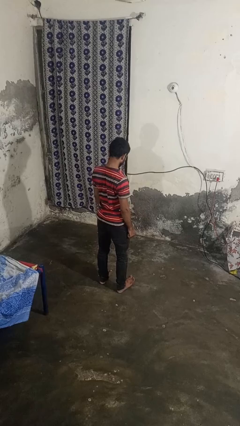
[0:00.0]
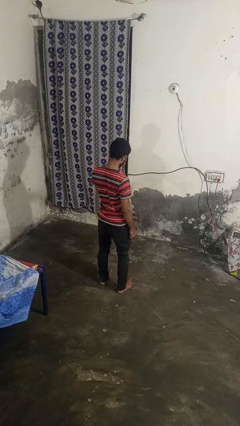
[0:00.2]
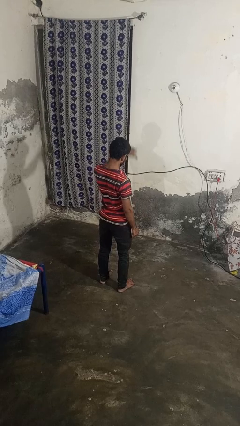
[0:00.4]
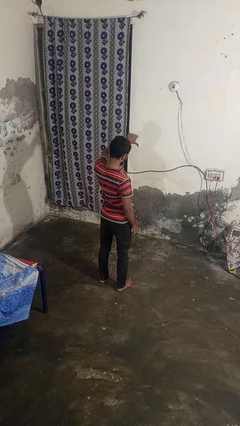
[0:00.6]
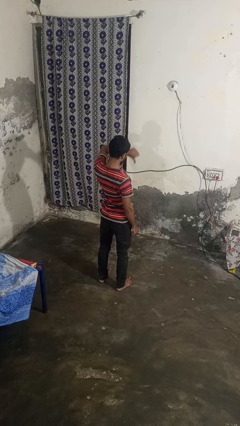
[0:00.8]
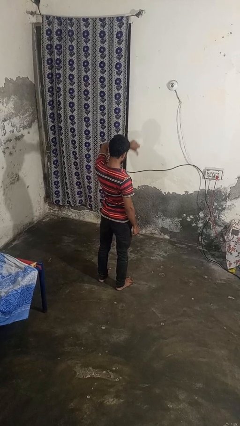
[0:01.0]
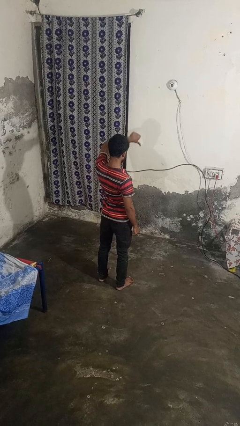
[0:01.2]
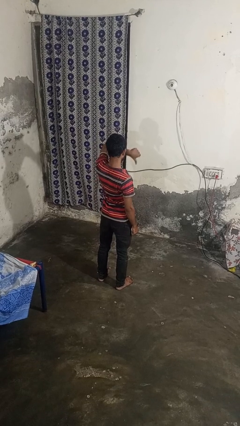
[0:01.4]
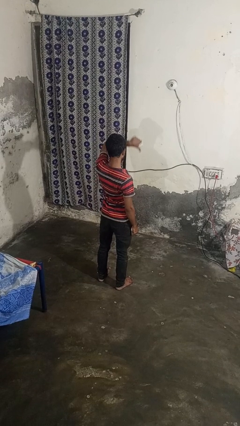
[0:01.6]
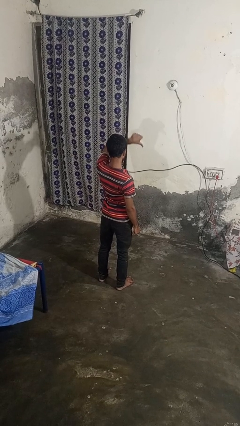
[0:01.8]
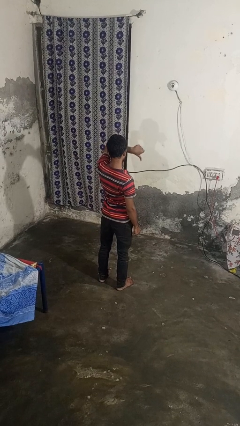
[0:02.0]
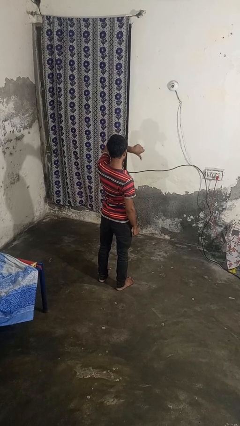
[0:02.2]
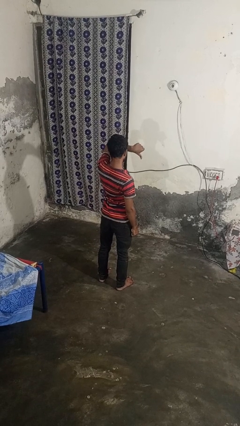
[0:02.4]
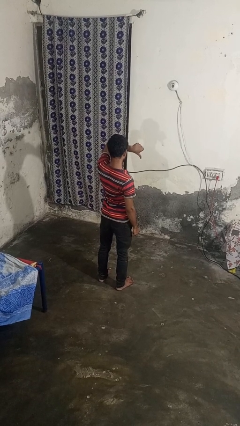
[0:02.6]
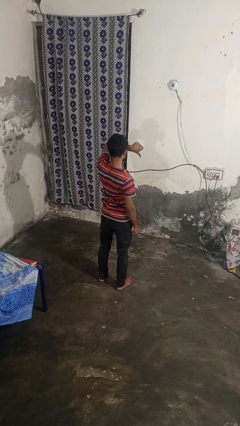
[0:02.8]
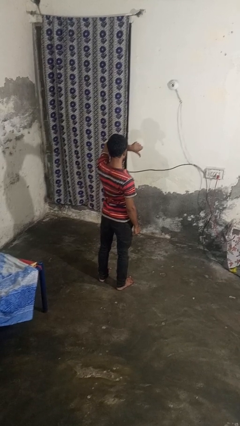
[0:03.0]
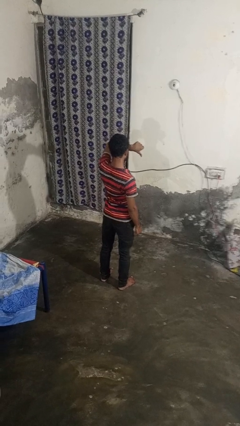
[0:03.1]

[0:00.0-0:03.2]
person gestures thumbs down

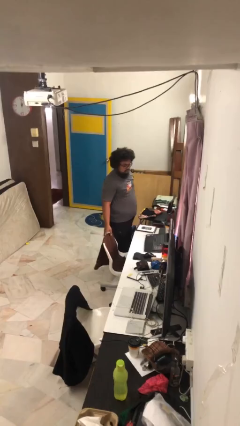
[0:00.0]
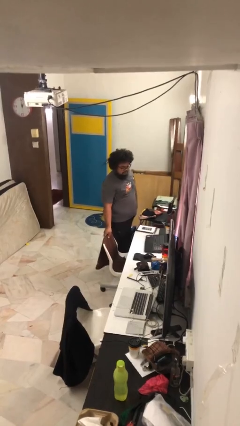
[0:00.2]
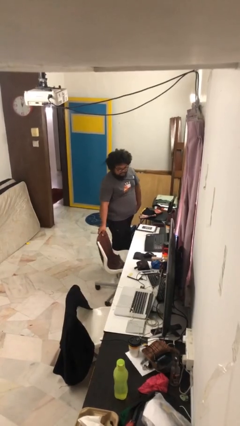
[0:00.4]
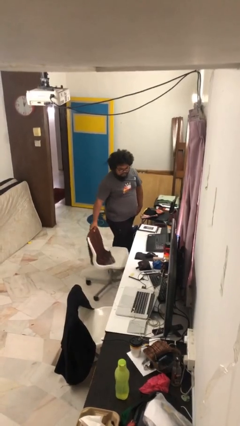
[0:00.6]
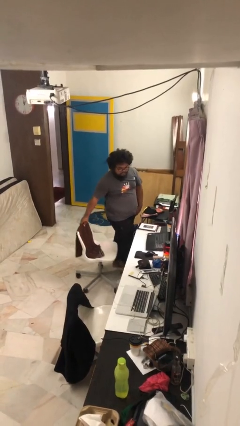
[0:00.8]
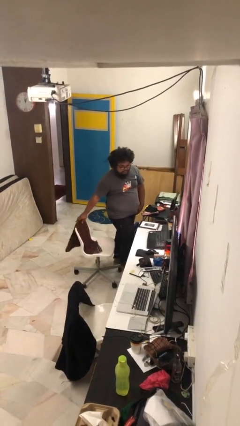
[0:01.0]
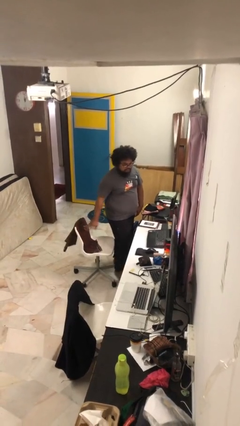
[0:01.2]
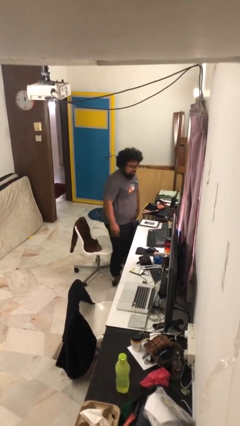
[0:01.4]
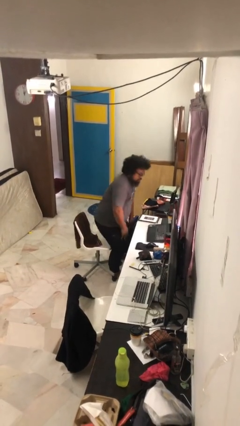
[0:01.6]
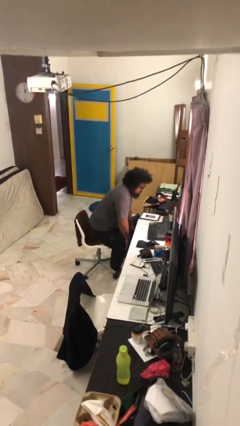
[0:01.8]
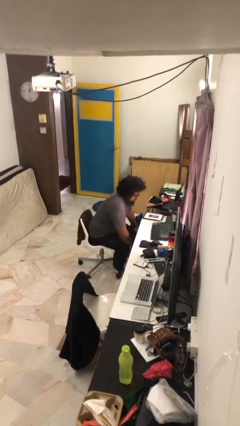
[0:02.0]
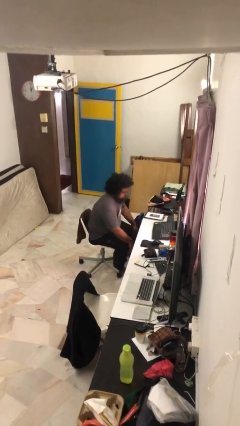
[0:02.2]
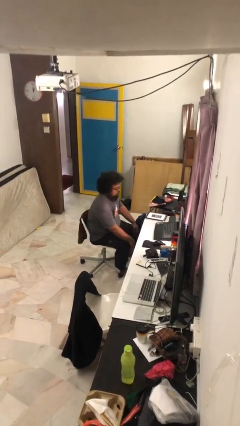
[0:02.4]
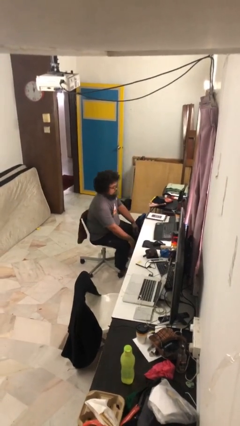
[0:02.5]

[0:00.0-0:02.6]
person sits down

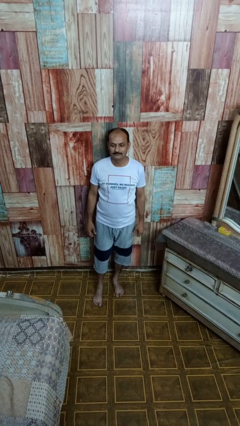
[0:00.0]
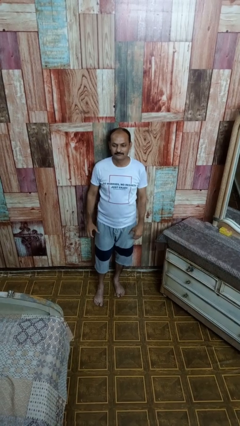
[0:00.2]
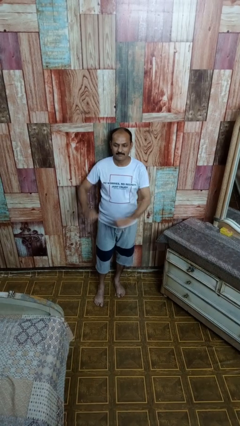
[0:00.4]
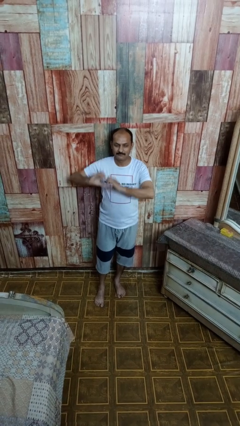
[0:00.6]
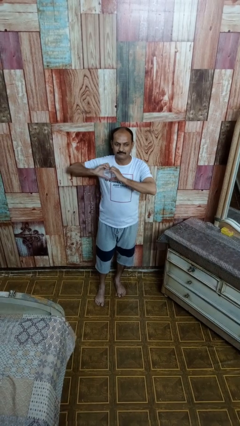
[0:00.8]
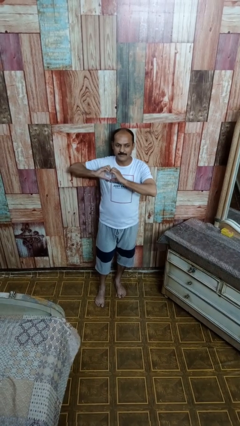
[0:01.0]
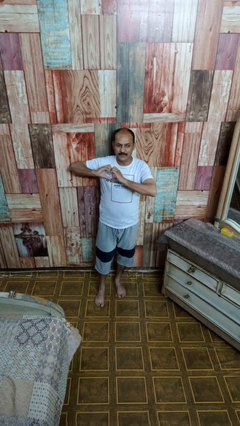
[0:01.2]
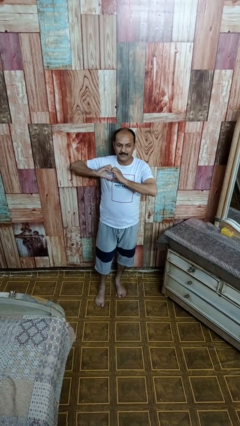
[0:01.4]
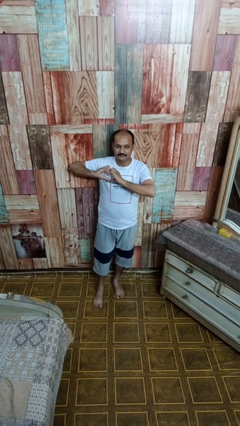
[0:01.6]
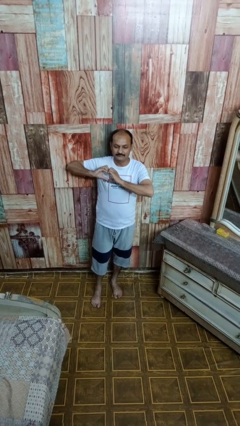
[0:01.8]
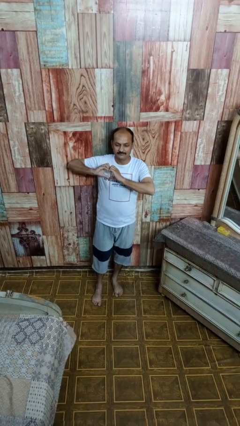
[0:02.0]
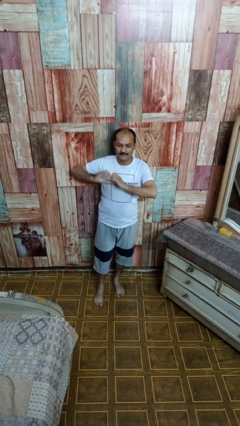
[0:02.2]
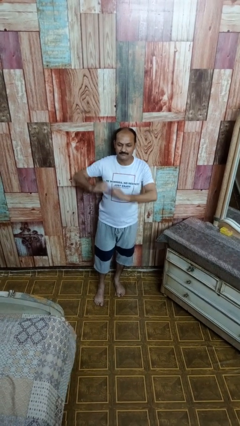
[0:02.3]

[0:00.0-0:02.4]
person gestures heart

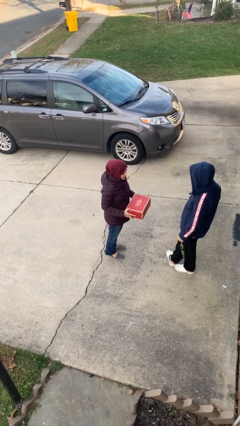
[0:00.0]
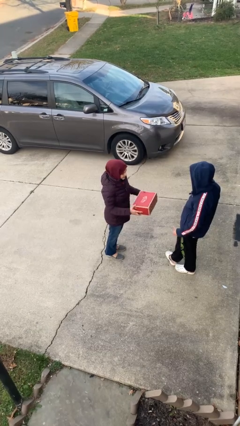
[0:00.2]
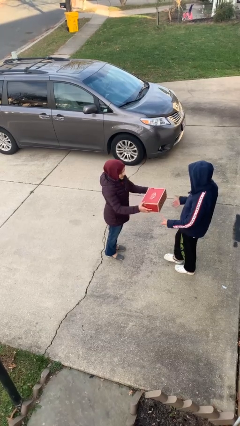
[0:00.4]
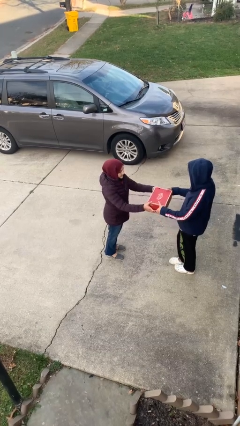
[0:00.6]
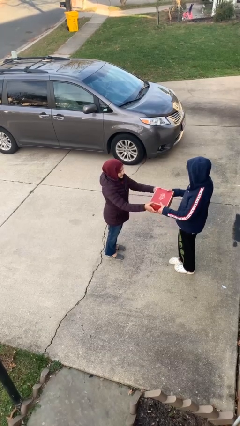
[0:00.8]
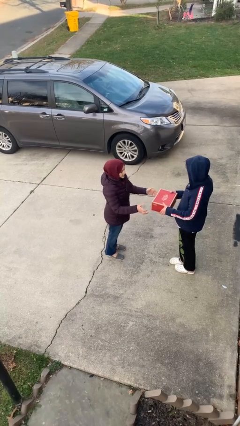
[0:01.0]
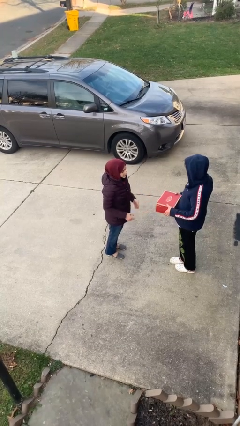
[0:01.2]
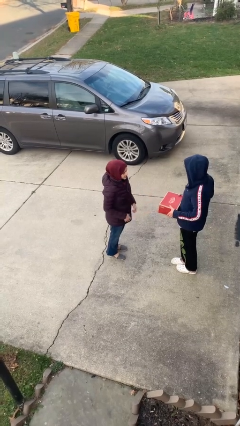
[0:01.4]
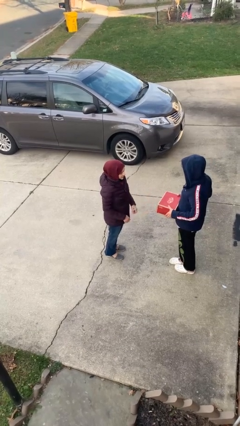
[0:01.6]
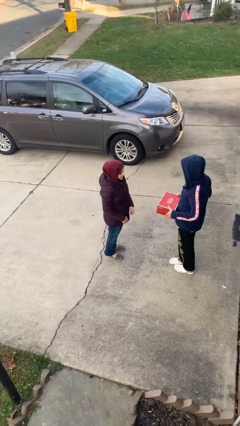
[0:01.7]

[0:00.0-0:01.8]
person transfers object to person

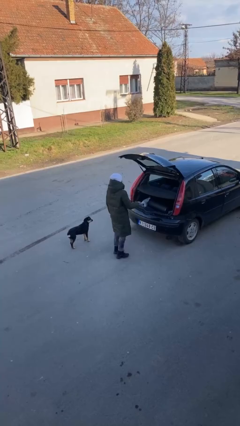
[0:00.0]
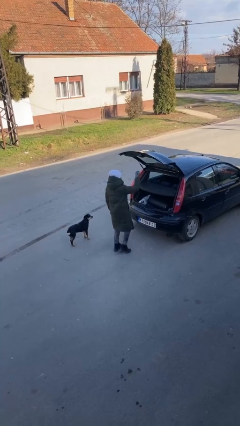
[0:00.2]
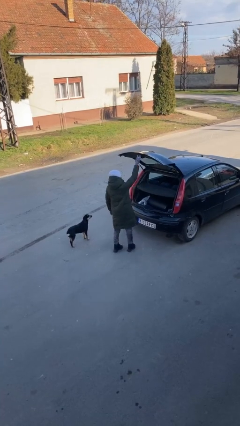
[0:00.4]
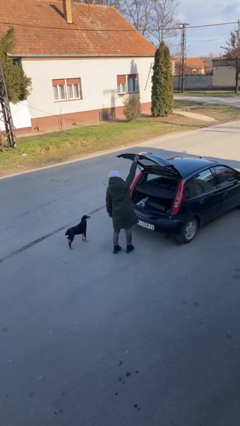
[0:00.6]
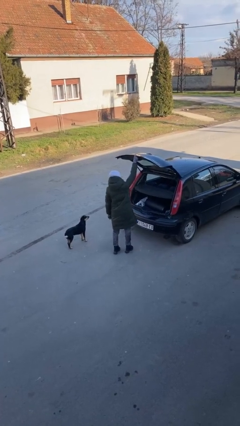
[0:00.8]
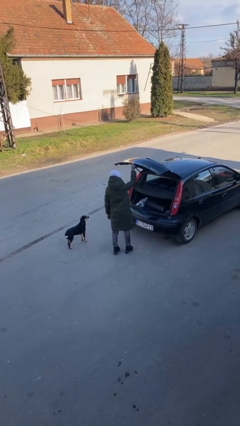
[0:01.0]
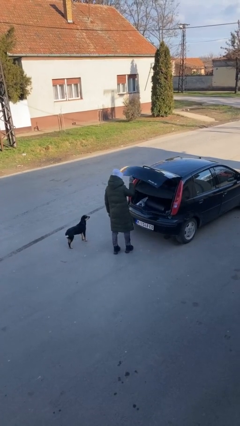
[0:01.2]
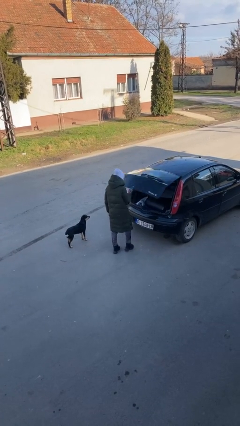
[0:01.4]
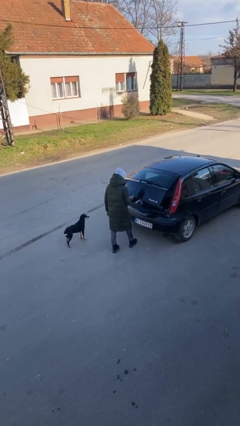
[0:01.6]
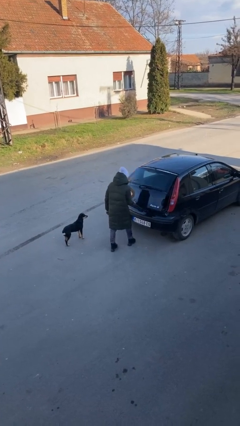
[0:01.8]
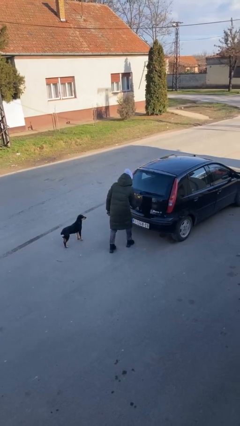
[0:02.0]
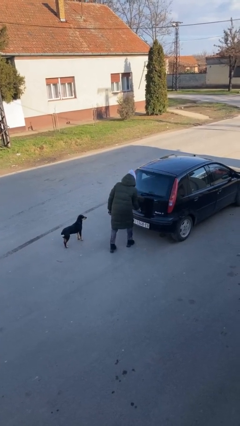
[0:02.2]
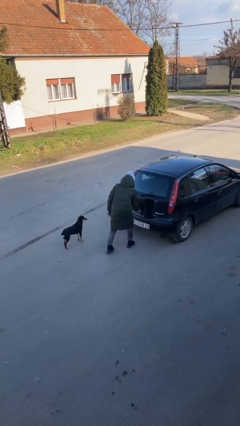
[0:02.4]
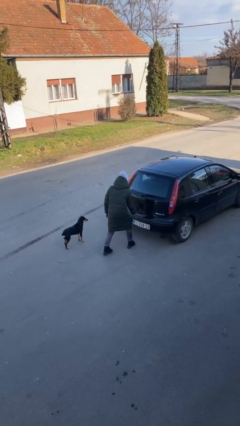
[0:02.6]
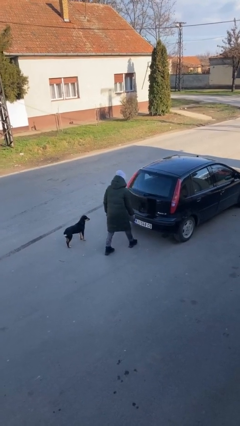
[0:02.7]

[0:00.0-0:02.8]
person closes car trunk

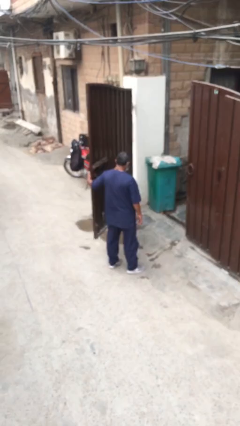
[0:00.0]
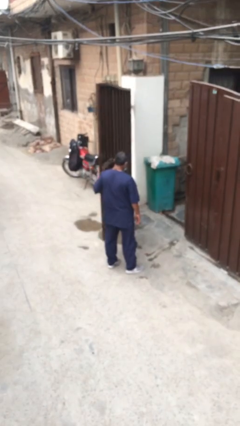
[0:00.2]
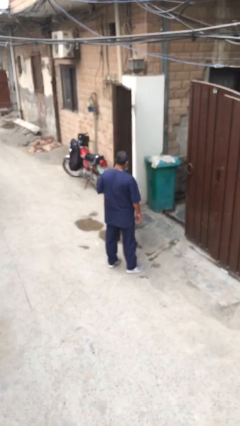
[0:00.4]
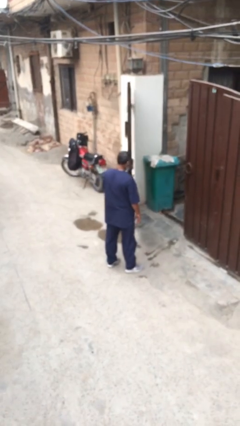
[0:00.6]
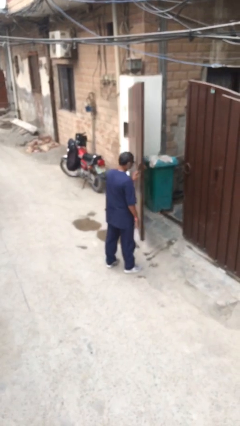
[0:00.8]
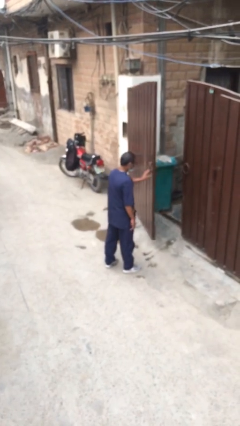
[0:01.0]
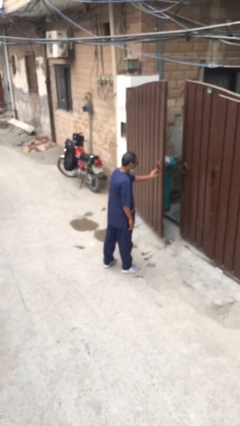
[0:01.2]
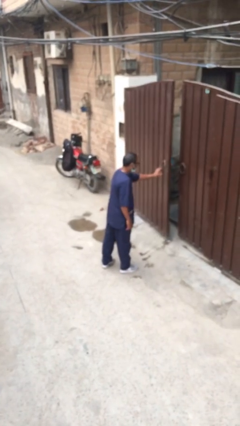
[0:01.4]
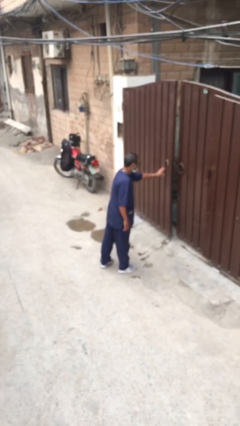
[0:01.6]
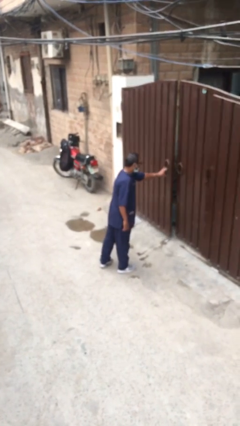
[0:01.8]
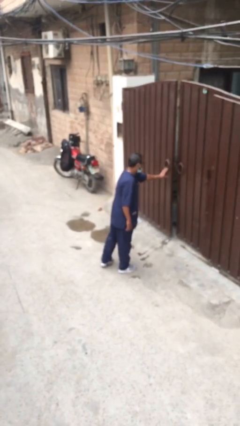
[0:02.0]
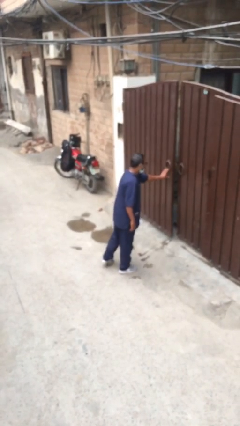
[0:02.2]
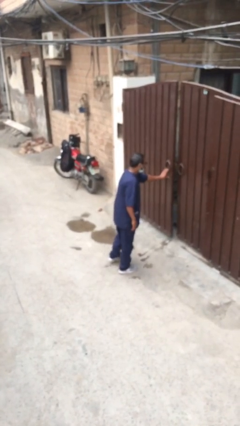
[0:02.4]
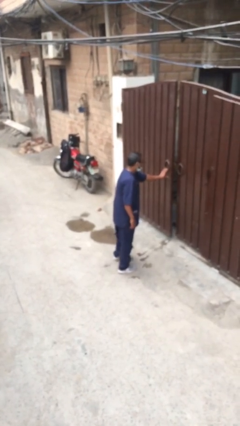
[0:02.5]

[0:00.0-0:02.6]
person closes facility door

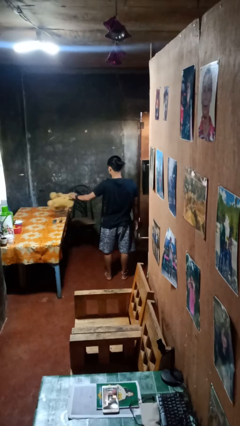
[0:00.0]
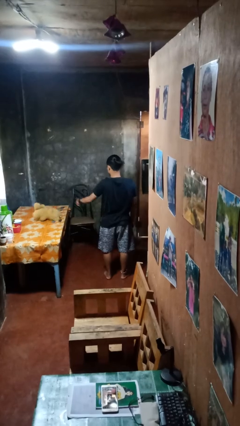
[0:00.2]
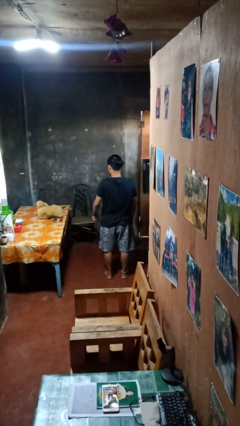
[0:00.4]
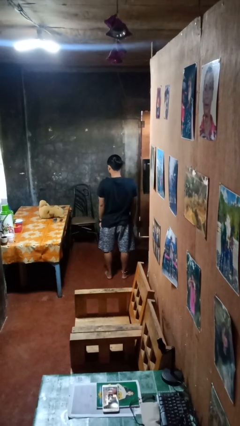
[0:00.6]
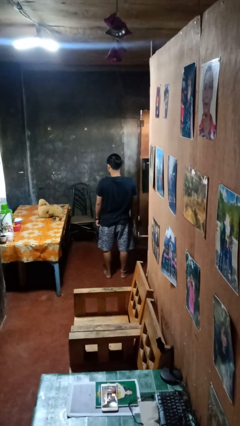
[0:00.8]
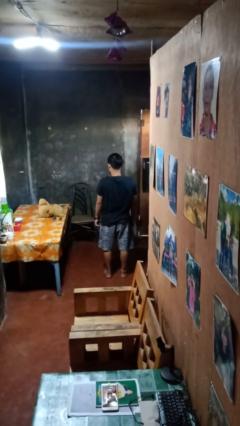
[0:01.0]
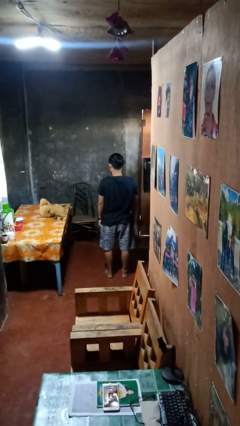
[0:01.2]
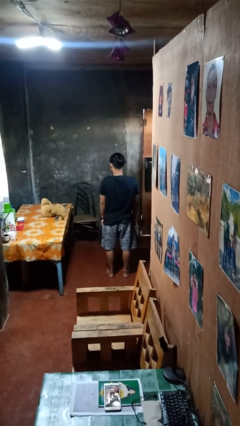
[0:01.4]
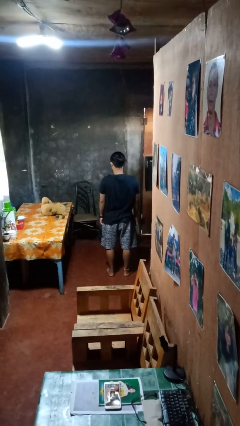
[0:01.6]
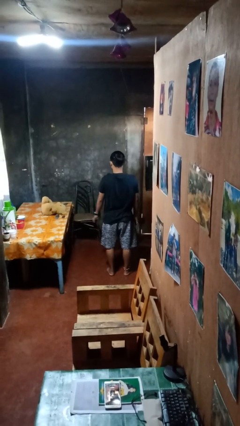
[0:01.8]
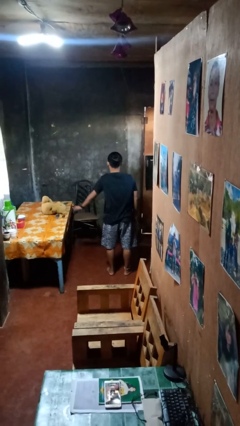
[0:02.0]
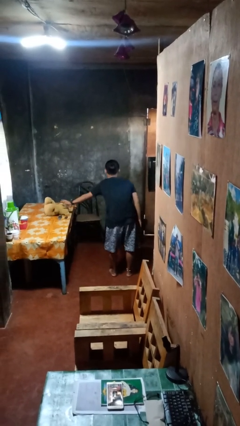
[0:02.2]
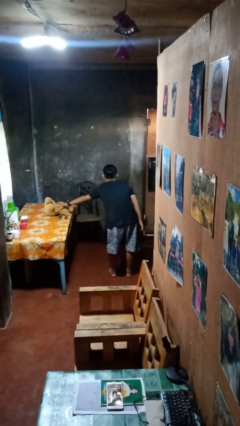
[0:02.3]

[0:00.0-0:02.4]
person throws object on table
